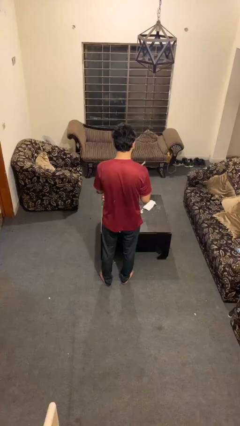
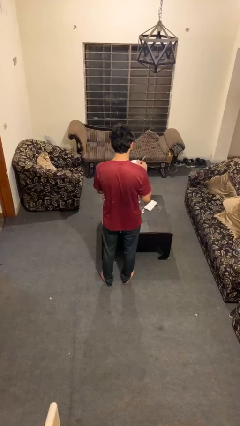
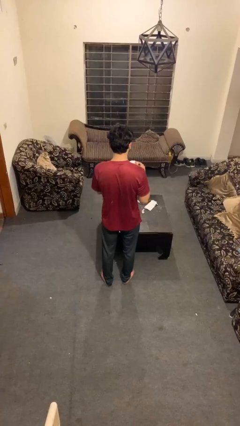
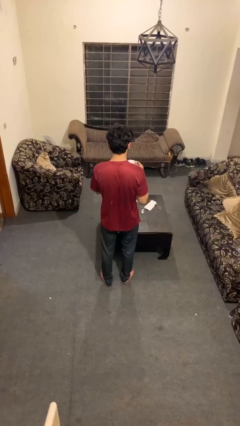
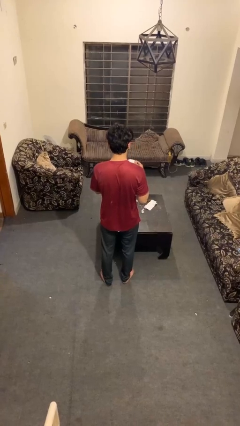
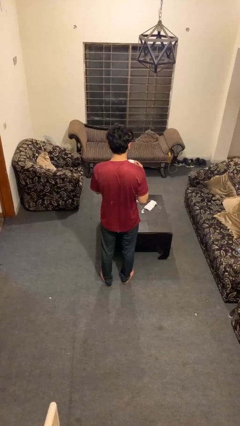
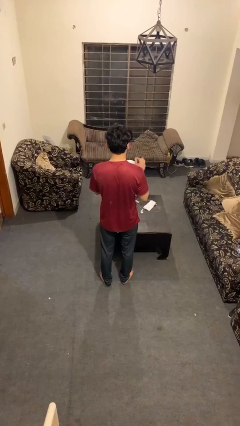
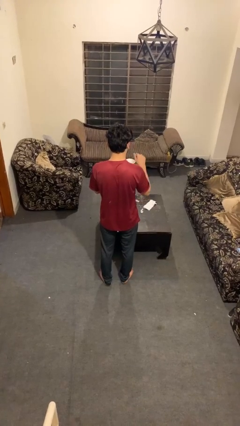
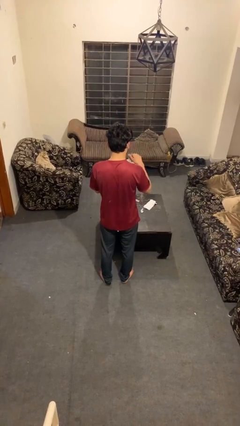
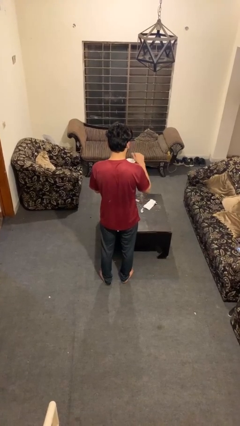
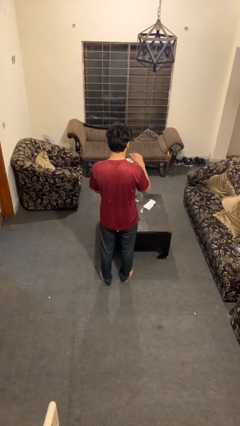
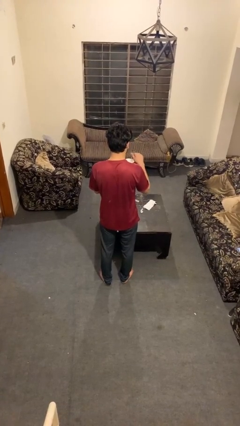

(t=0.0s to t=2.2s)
person stirs mug

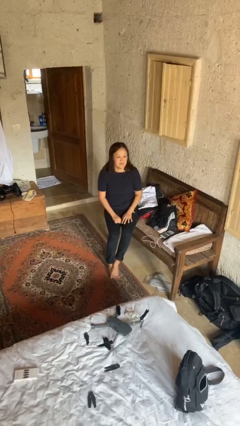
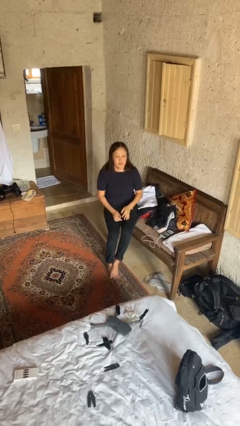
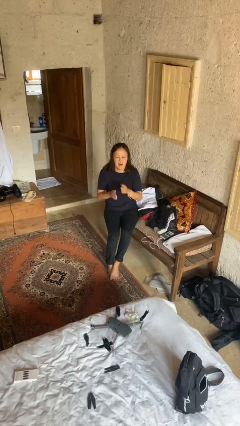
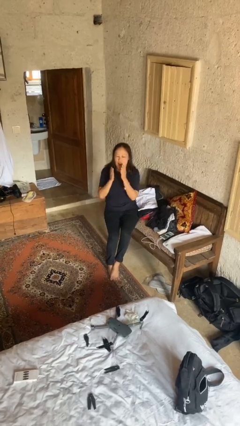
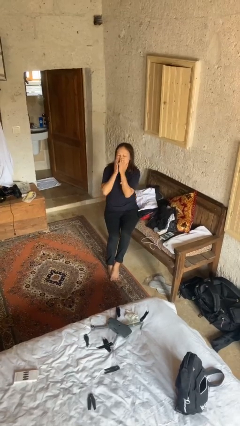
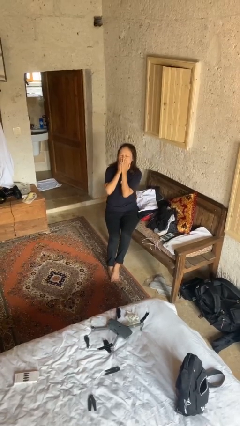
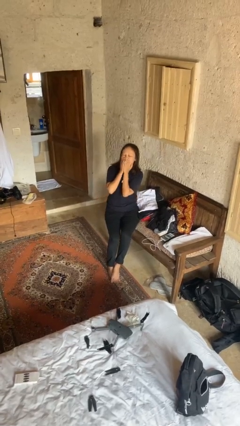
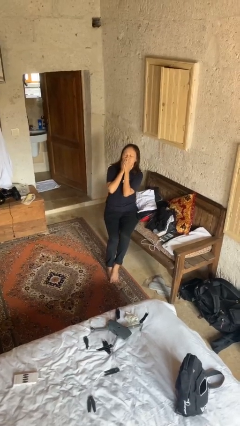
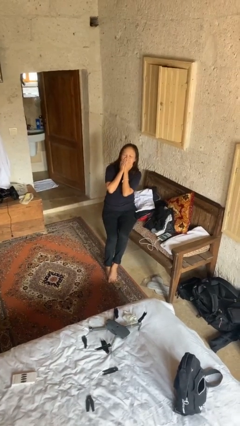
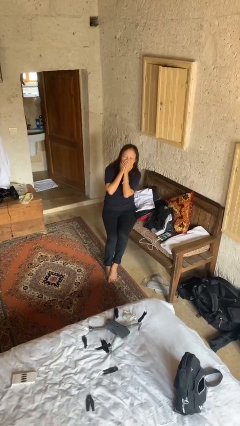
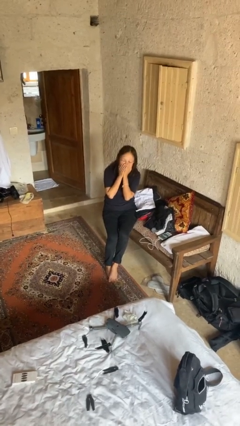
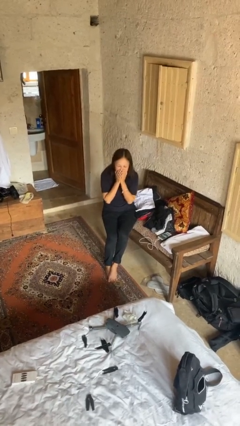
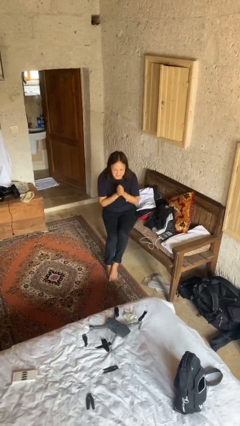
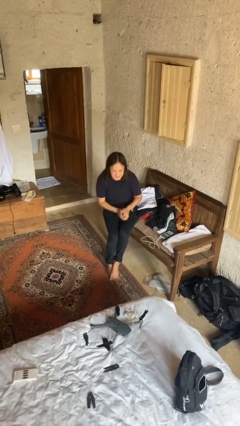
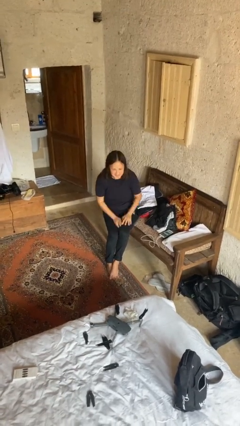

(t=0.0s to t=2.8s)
person yawns

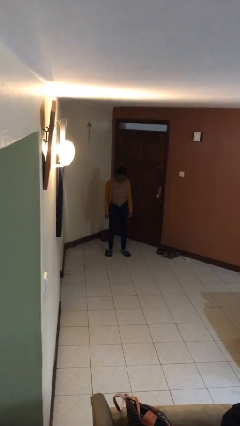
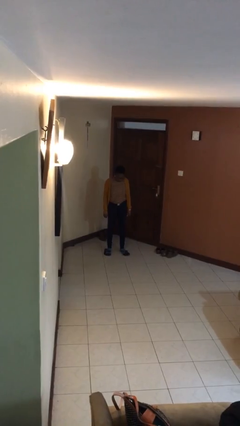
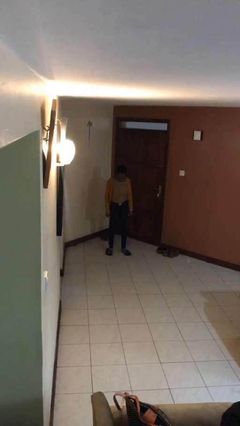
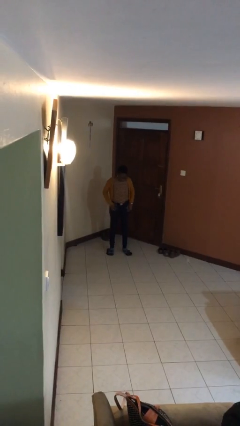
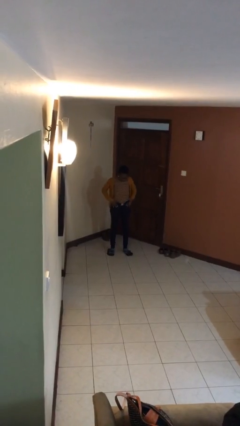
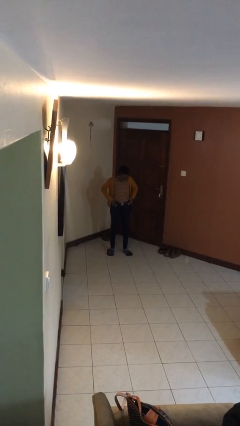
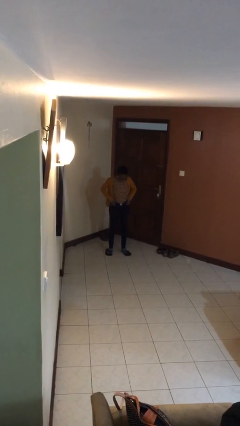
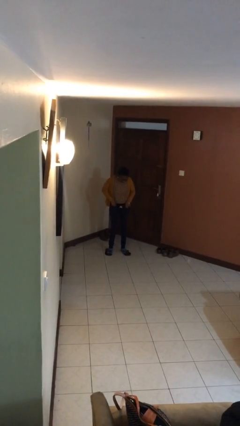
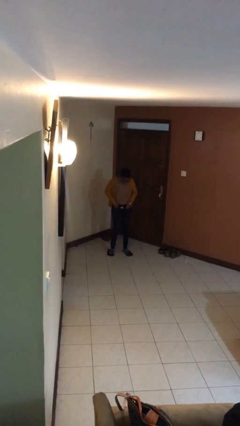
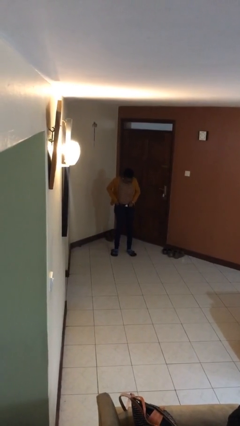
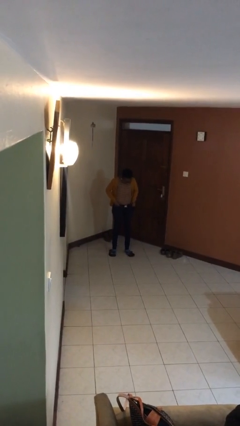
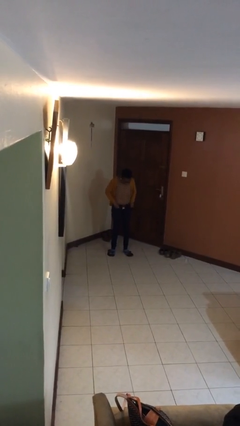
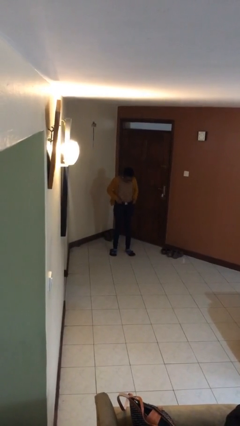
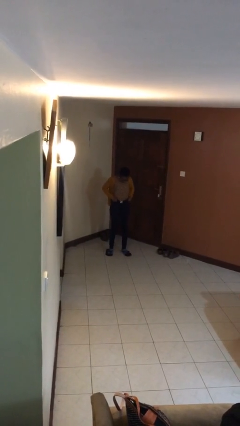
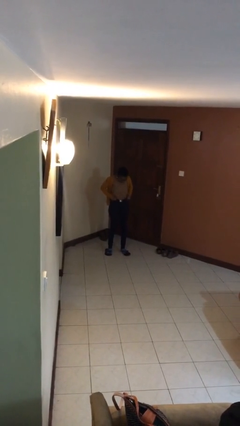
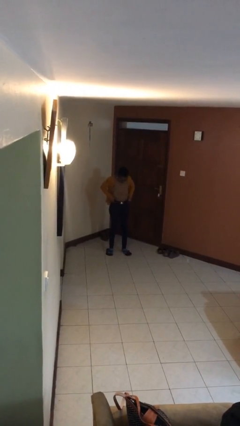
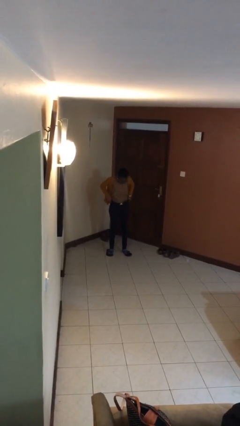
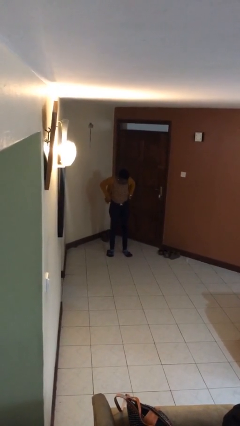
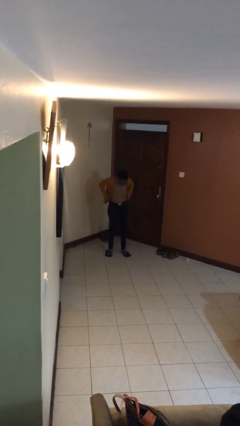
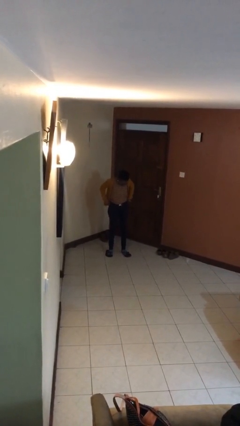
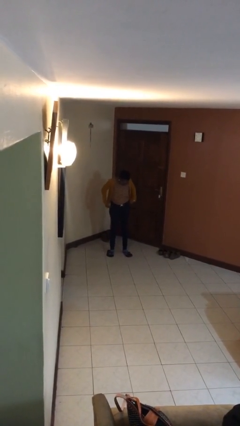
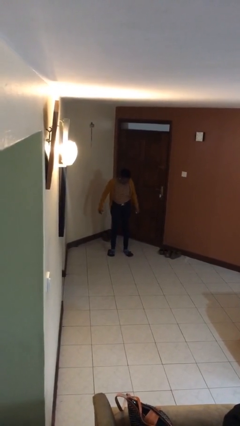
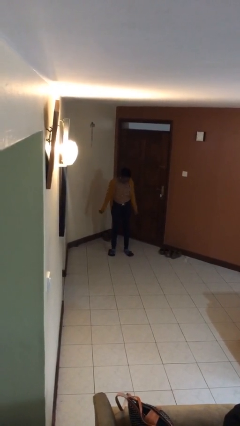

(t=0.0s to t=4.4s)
person hikes up pants

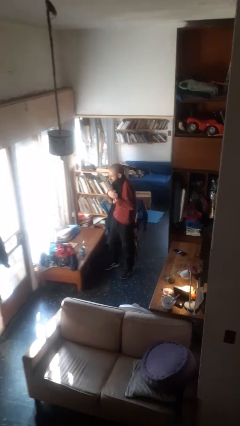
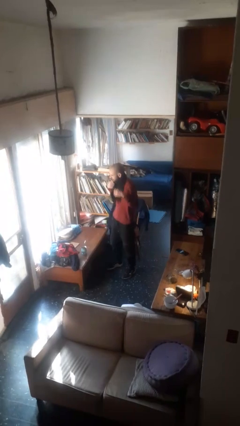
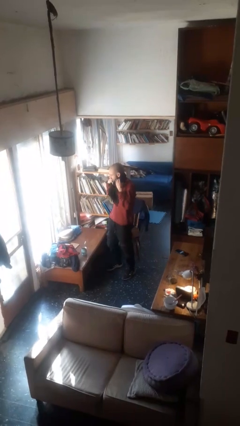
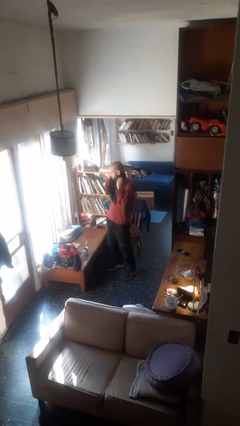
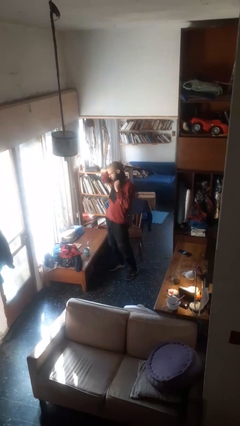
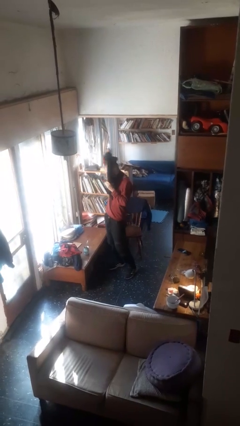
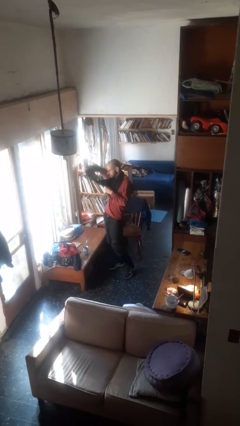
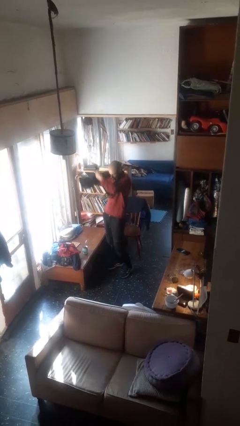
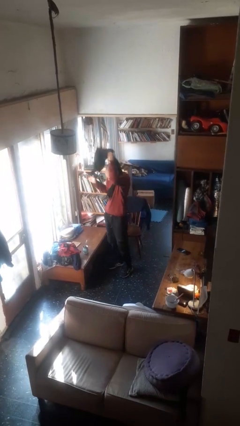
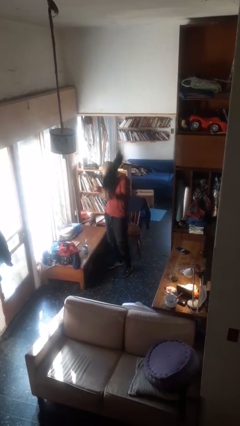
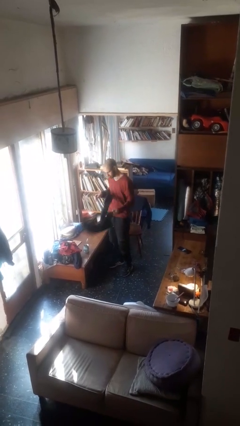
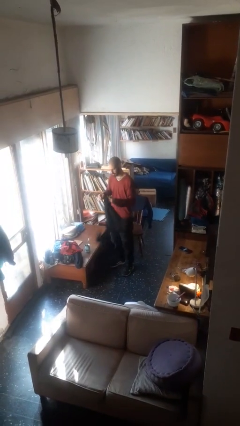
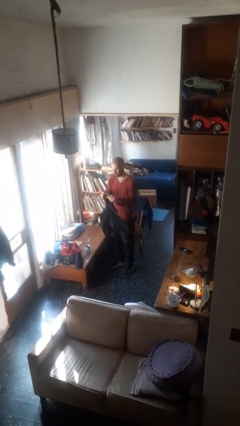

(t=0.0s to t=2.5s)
person takes off scarf

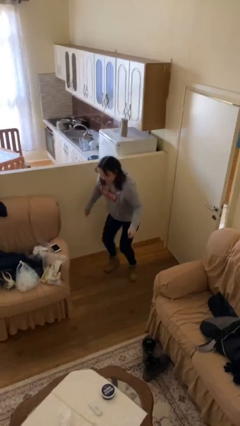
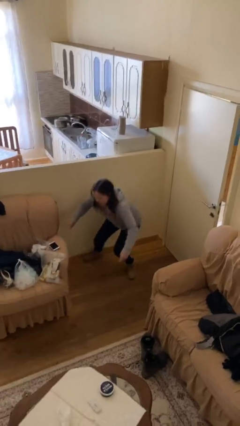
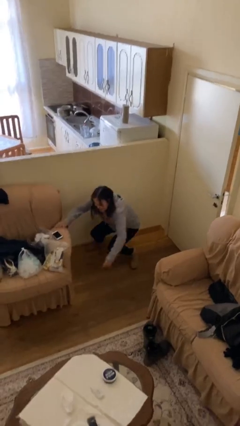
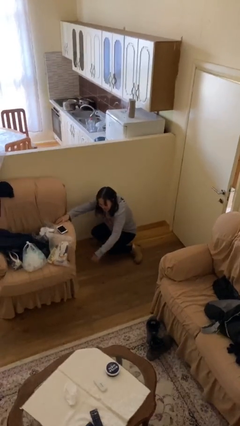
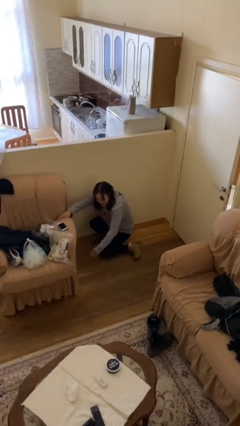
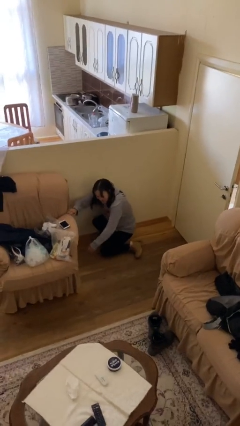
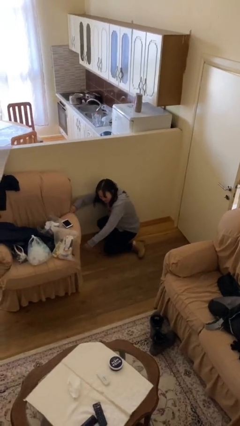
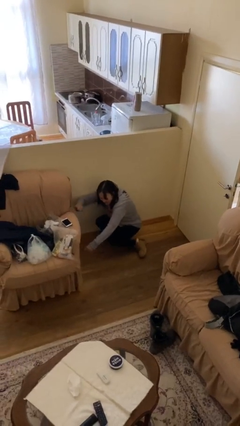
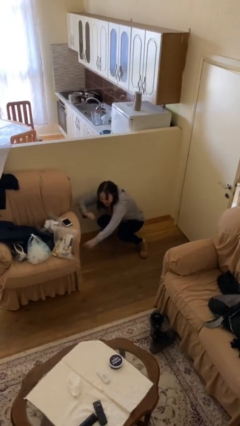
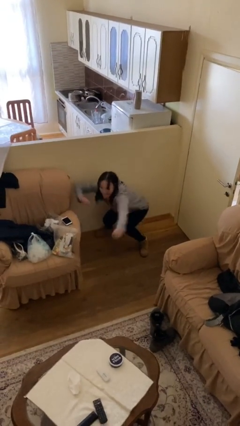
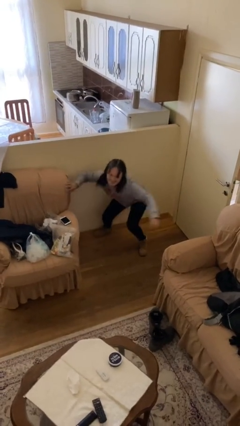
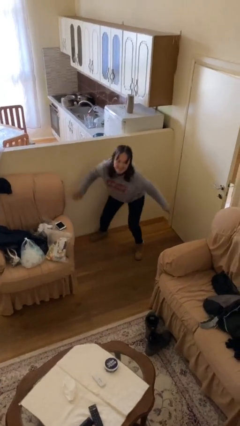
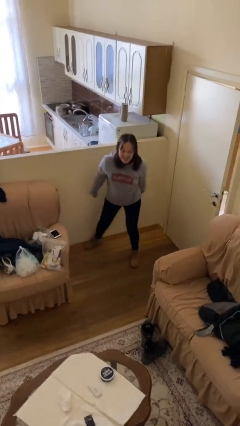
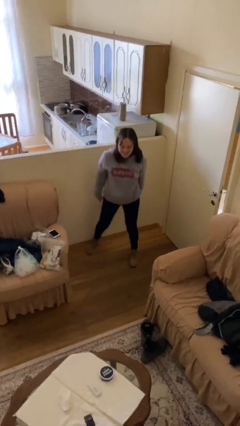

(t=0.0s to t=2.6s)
person sits down

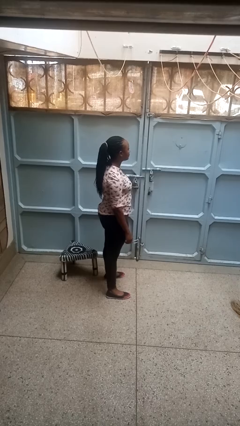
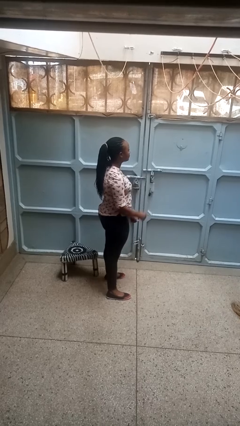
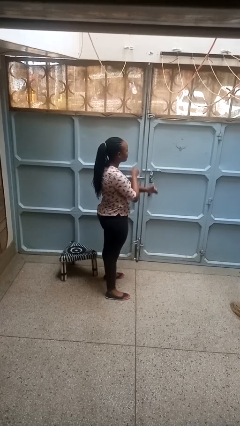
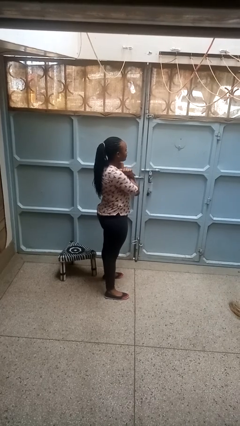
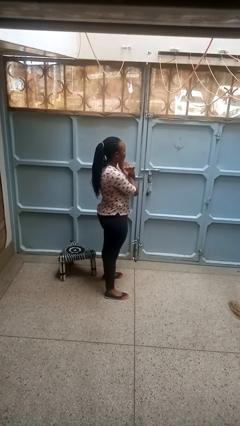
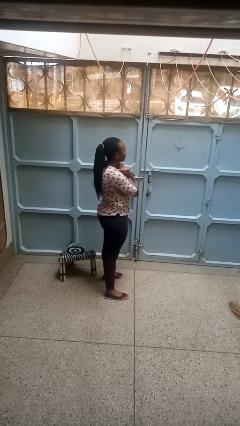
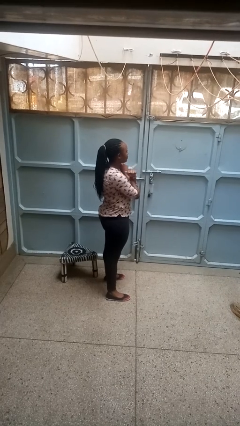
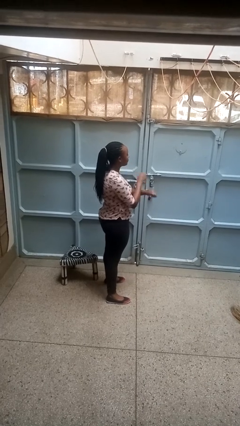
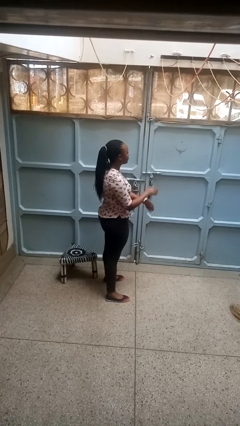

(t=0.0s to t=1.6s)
person gestures arms x

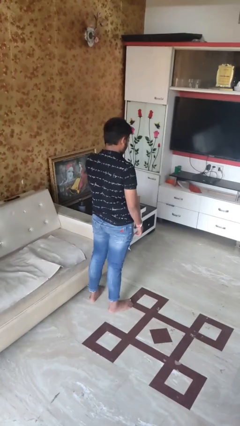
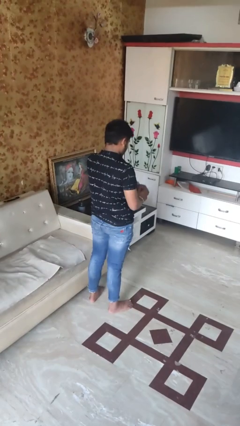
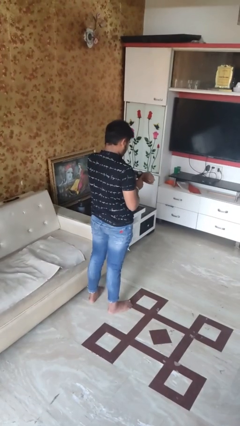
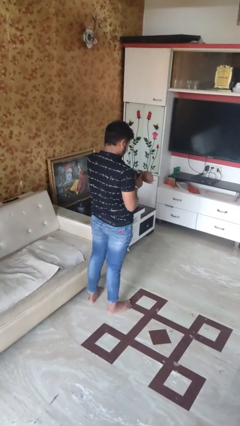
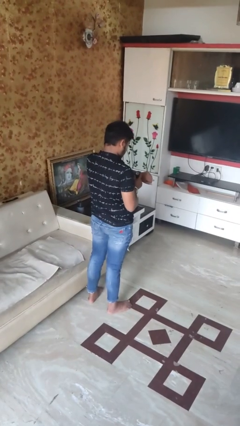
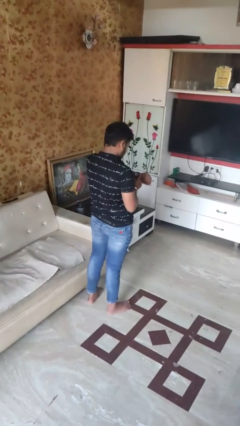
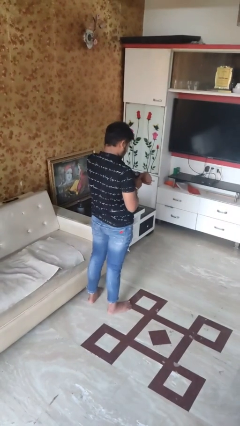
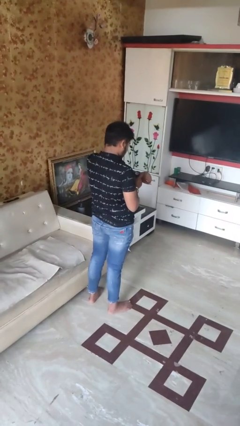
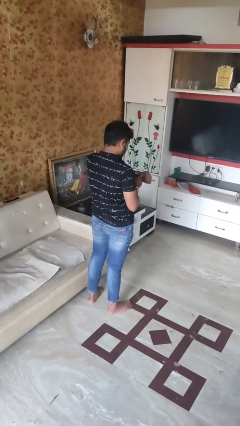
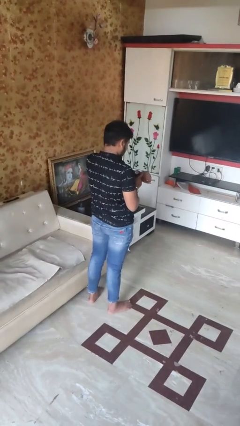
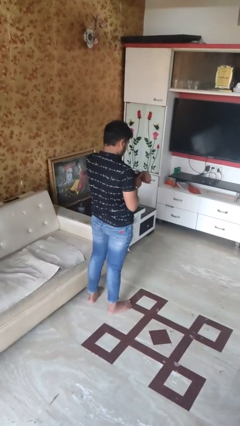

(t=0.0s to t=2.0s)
person looks at wristwatch
